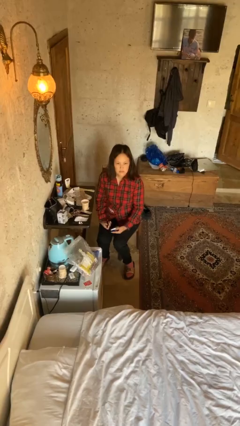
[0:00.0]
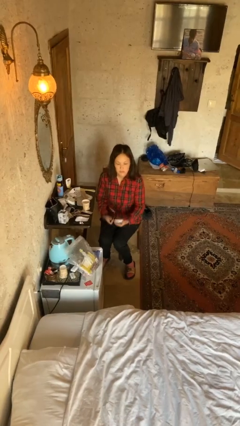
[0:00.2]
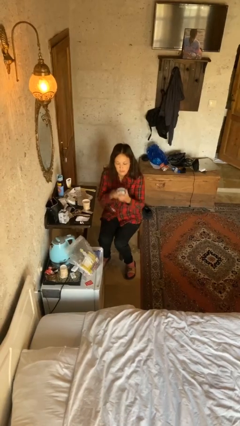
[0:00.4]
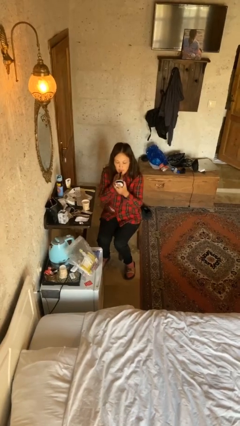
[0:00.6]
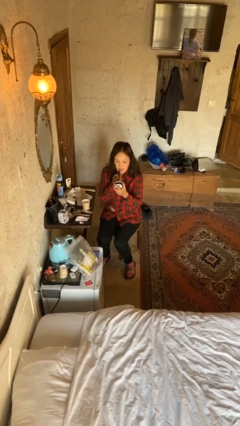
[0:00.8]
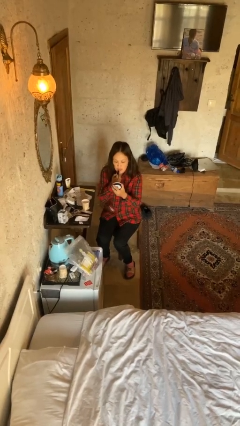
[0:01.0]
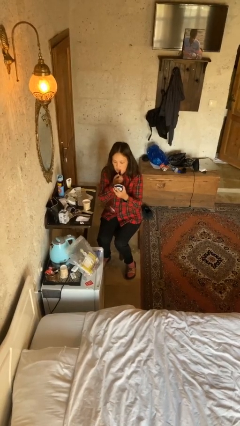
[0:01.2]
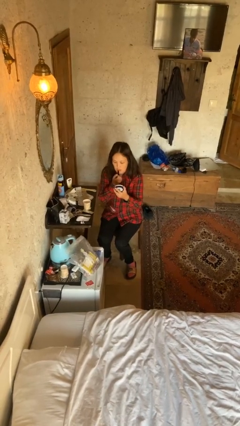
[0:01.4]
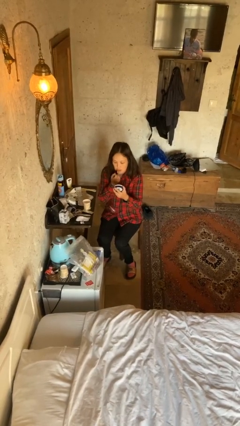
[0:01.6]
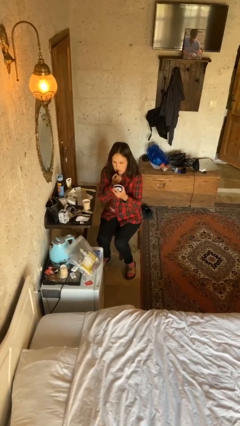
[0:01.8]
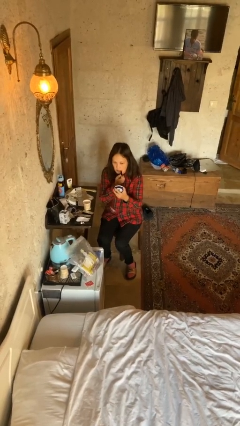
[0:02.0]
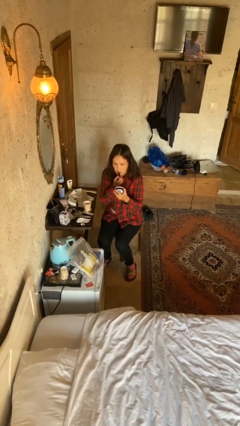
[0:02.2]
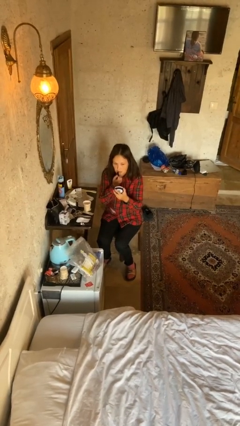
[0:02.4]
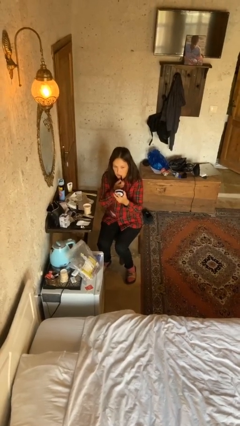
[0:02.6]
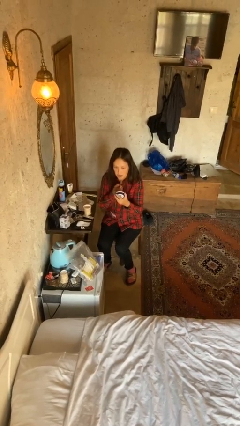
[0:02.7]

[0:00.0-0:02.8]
person applies lip makeup

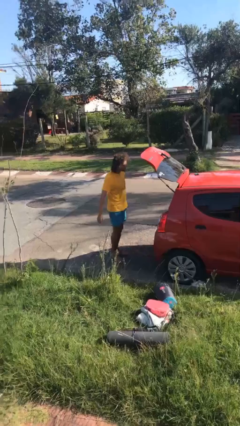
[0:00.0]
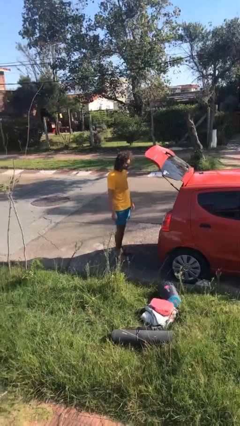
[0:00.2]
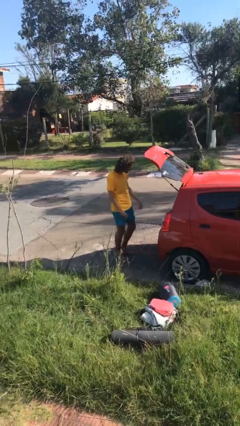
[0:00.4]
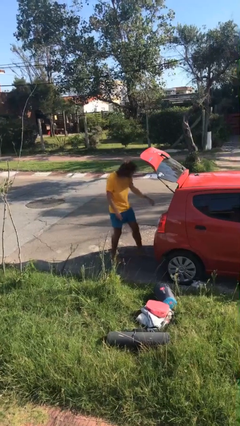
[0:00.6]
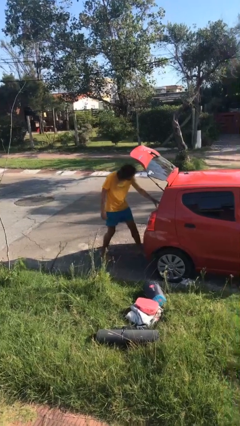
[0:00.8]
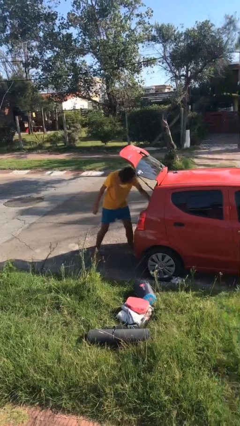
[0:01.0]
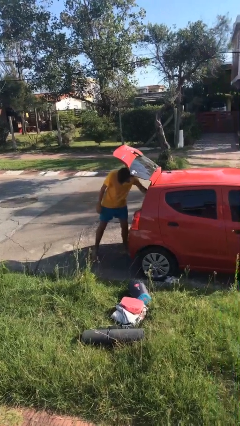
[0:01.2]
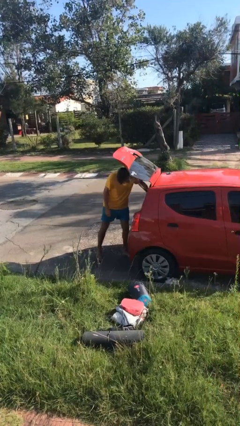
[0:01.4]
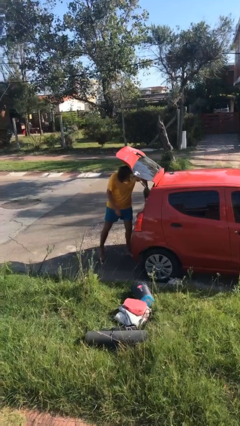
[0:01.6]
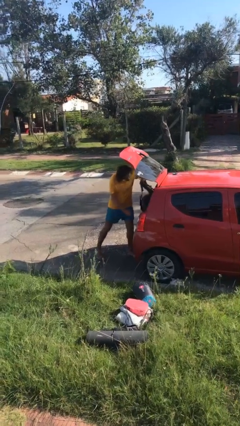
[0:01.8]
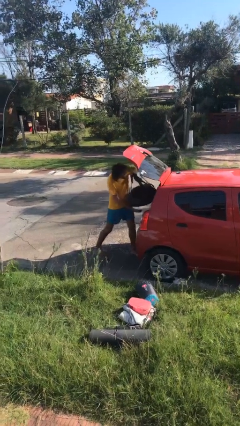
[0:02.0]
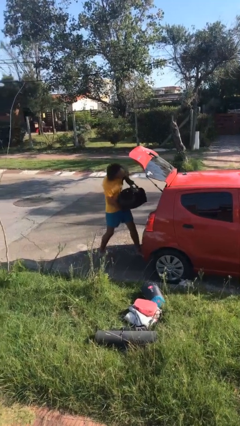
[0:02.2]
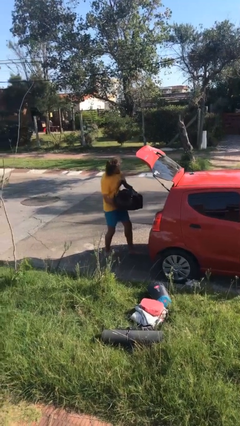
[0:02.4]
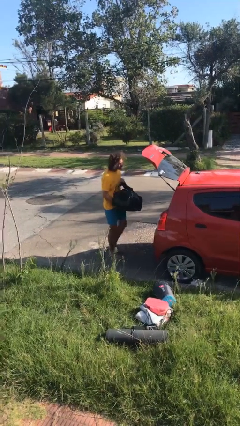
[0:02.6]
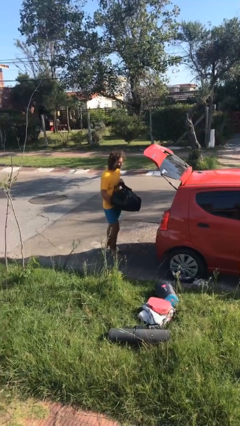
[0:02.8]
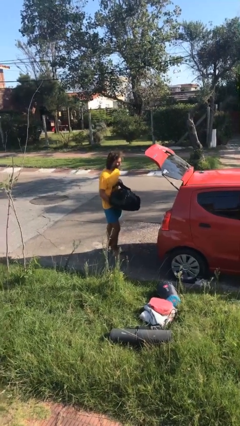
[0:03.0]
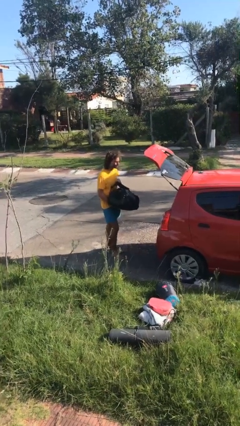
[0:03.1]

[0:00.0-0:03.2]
person unloads car

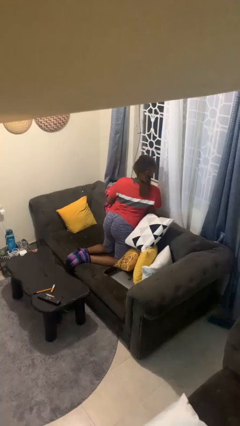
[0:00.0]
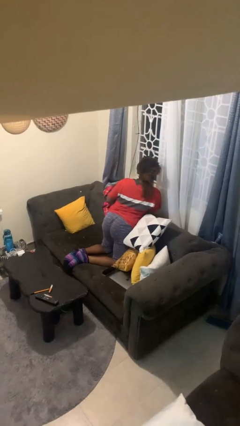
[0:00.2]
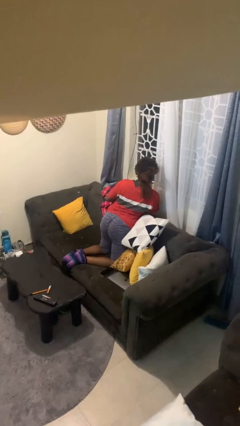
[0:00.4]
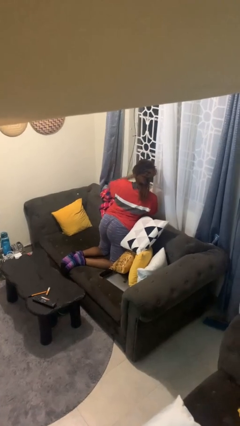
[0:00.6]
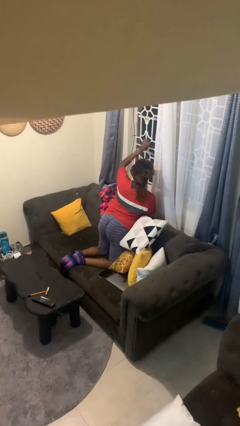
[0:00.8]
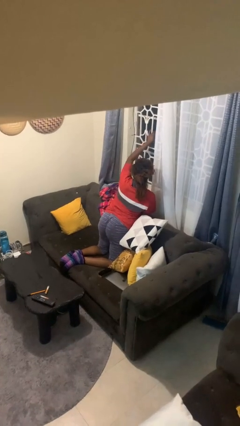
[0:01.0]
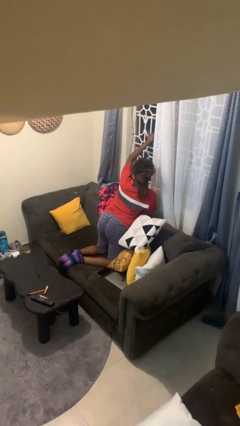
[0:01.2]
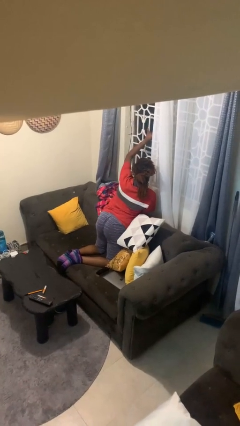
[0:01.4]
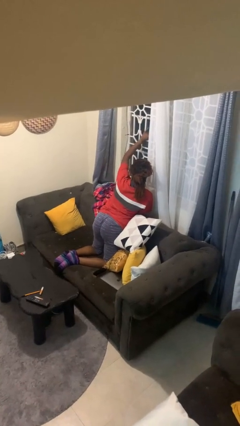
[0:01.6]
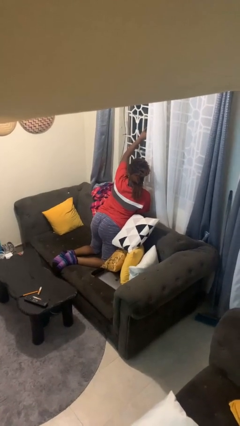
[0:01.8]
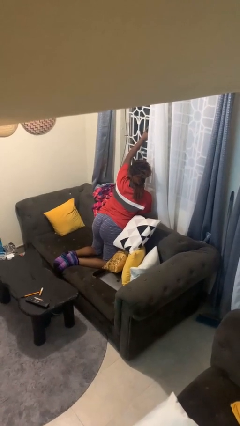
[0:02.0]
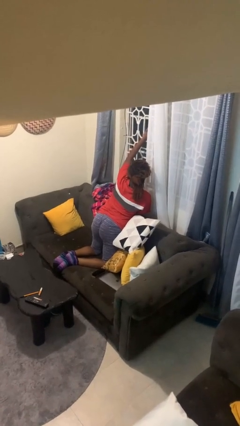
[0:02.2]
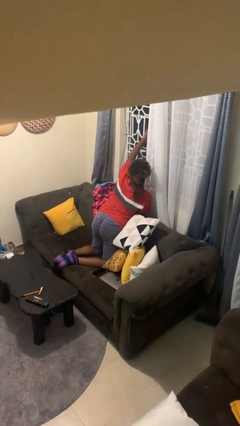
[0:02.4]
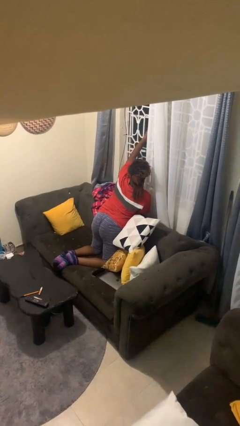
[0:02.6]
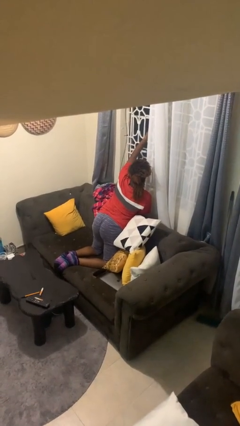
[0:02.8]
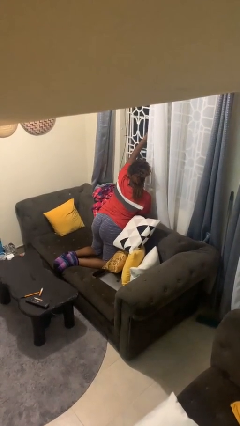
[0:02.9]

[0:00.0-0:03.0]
person opens home window

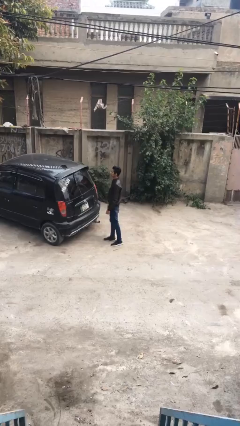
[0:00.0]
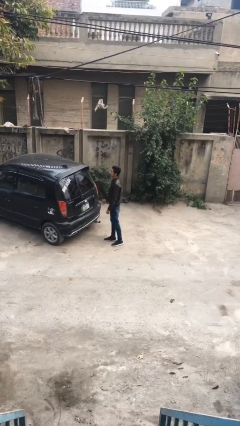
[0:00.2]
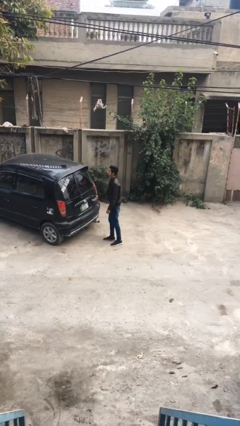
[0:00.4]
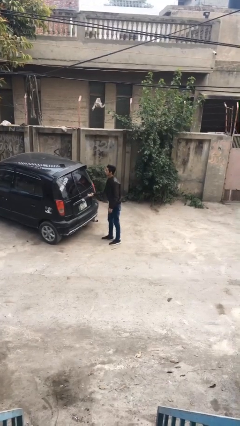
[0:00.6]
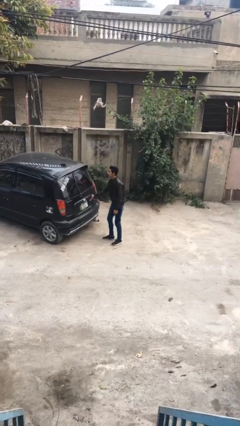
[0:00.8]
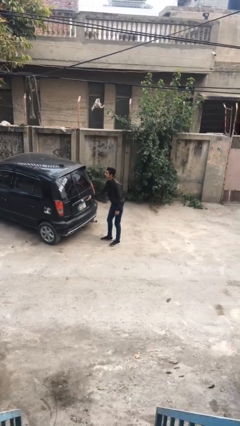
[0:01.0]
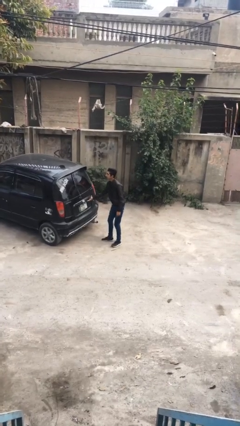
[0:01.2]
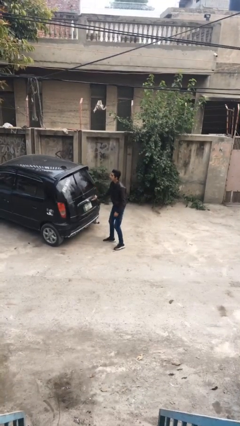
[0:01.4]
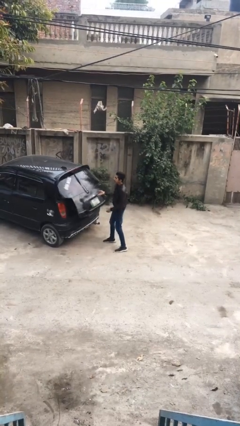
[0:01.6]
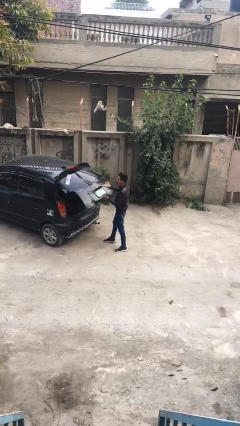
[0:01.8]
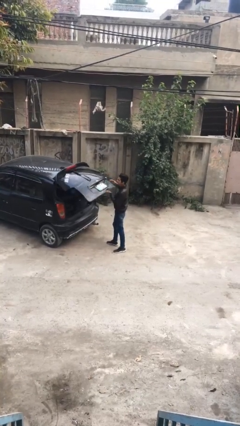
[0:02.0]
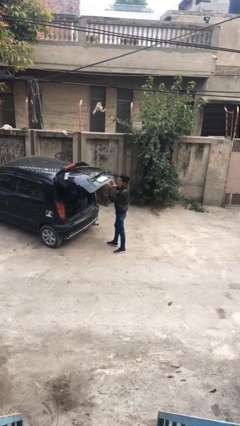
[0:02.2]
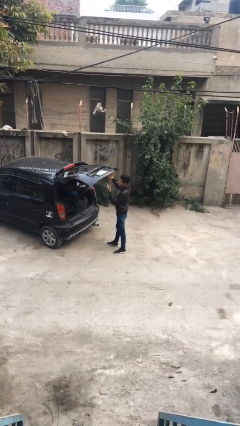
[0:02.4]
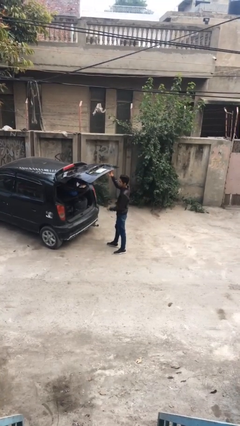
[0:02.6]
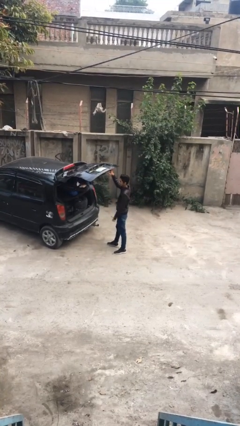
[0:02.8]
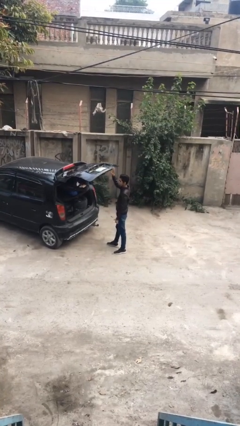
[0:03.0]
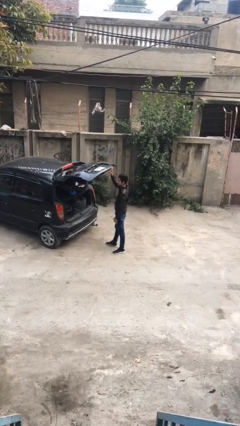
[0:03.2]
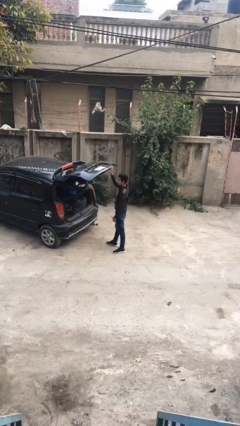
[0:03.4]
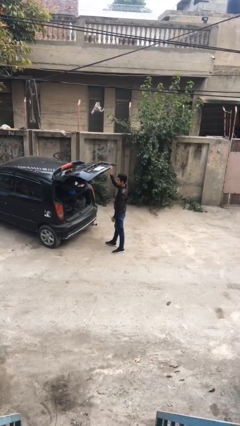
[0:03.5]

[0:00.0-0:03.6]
person opens car trunk

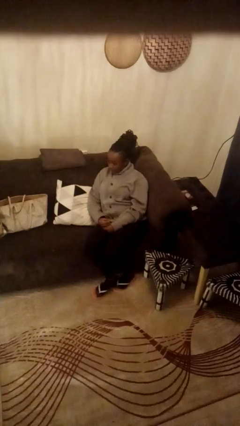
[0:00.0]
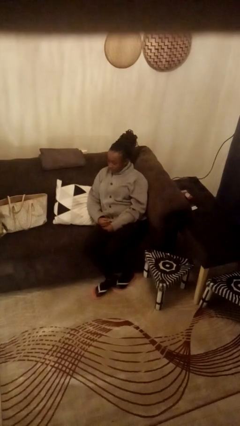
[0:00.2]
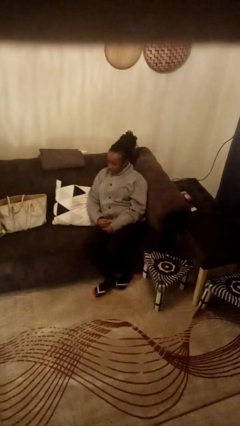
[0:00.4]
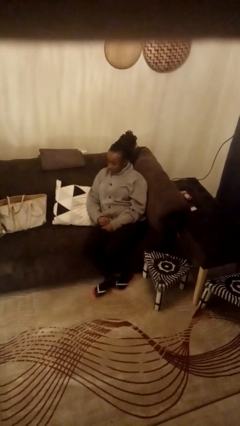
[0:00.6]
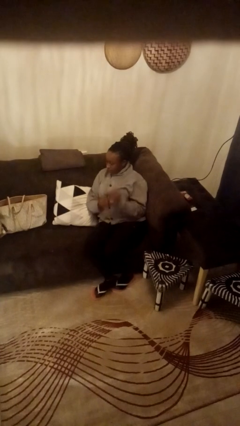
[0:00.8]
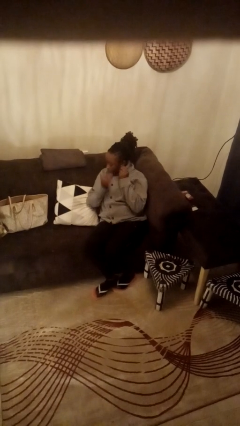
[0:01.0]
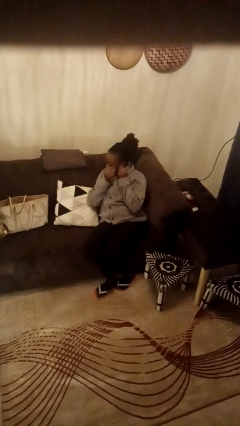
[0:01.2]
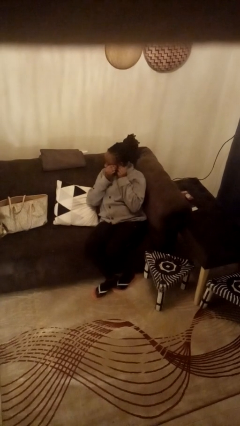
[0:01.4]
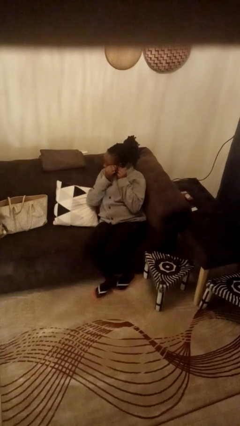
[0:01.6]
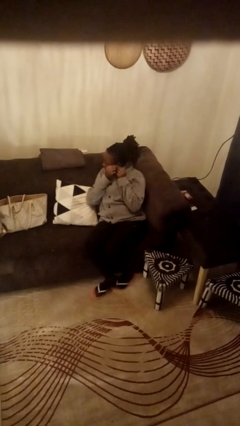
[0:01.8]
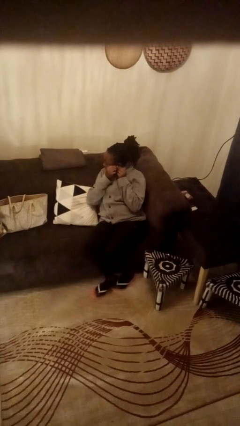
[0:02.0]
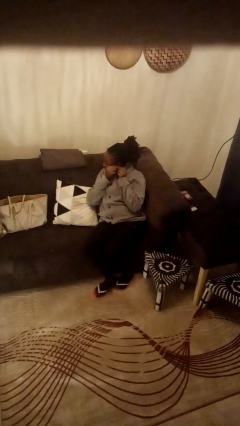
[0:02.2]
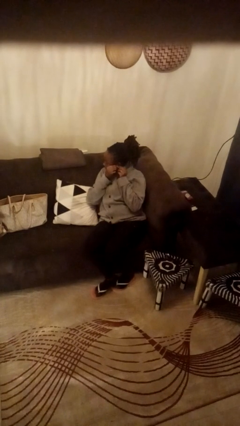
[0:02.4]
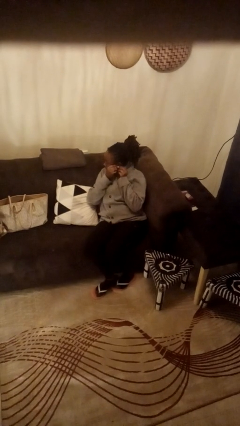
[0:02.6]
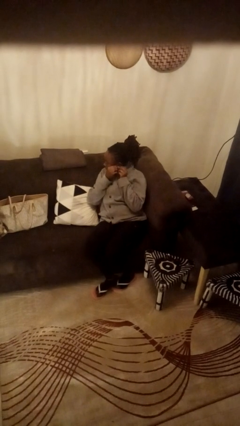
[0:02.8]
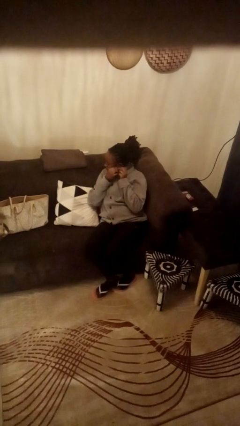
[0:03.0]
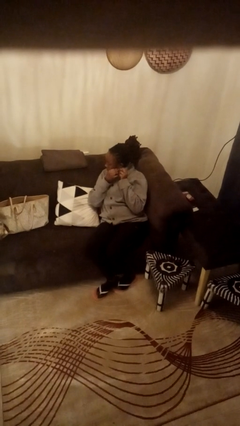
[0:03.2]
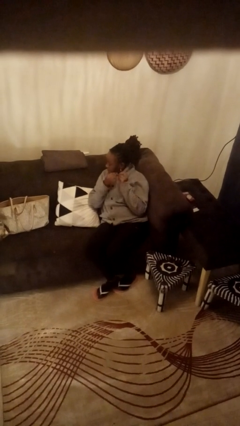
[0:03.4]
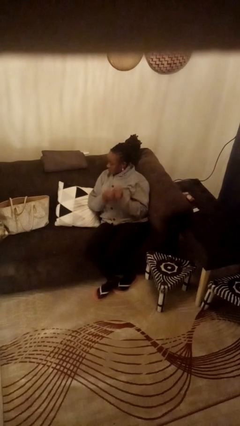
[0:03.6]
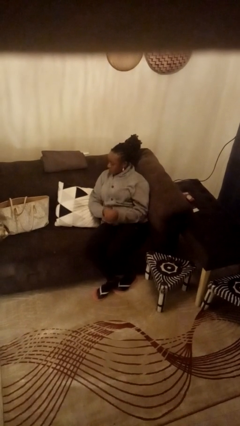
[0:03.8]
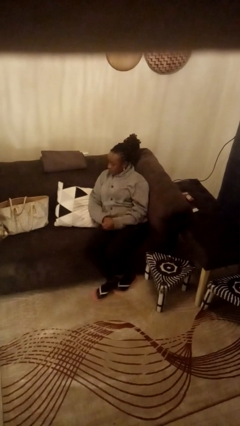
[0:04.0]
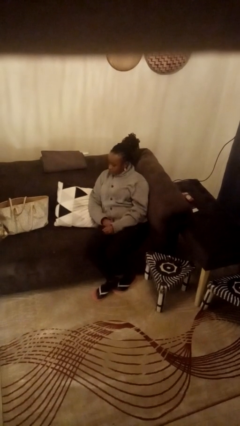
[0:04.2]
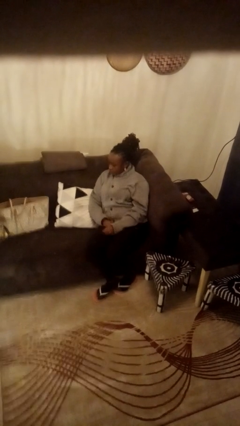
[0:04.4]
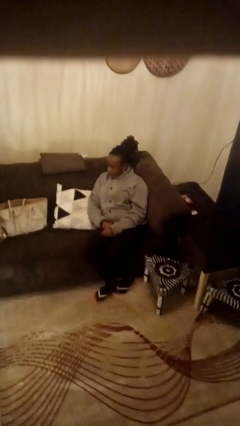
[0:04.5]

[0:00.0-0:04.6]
person puts on earrings

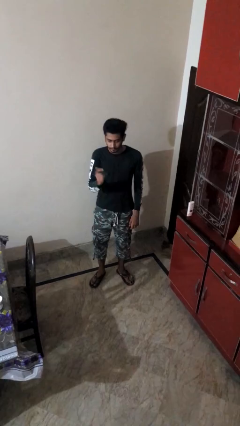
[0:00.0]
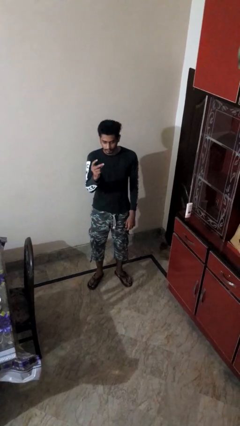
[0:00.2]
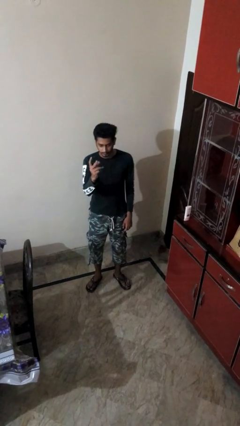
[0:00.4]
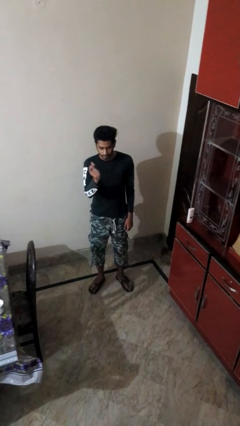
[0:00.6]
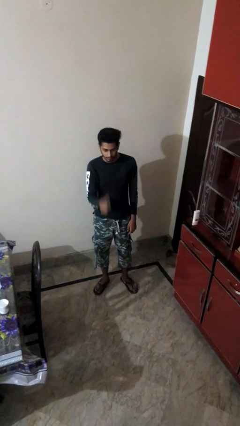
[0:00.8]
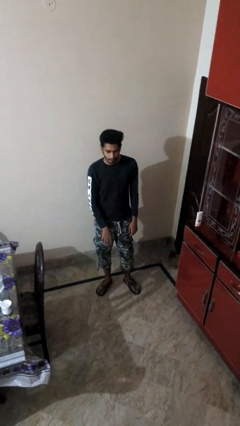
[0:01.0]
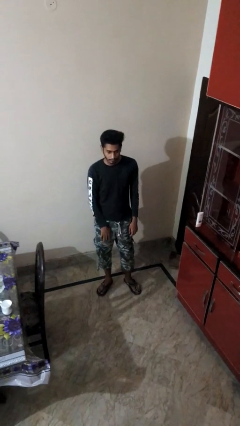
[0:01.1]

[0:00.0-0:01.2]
person snaps fingers
